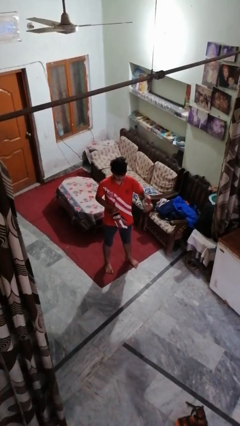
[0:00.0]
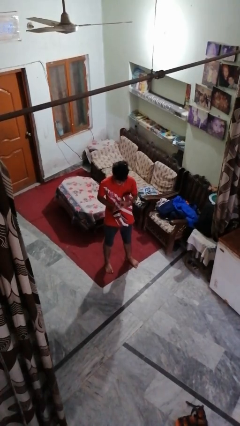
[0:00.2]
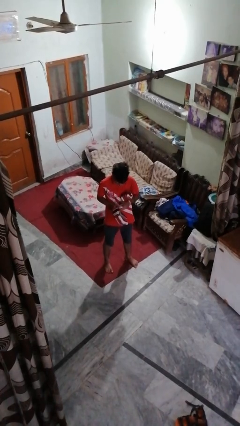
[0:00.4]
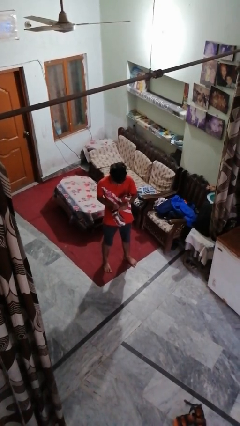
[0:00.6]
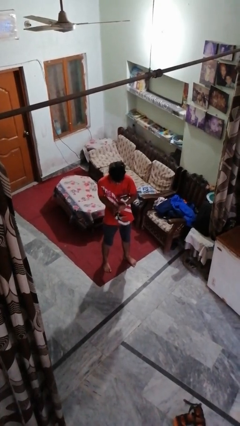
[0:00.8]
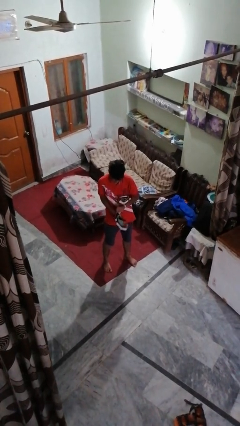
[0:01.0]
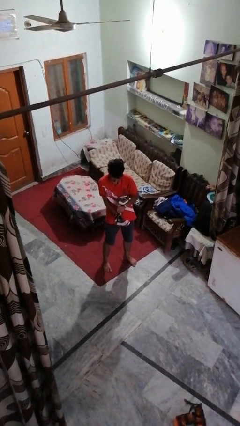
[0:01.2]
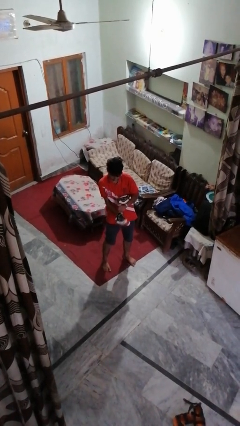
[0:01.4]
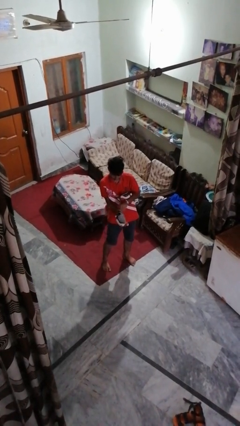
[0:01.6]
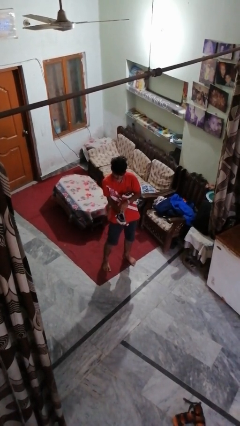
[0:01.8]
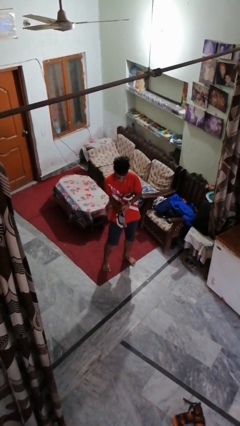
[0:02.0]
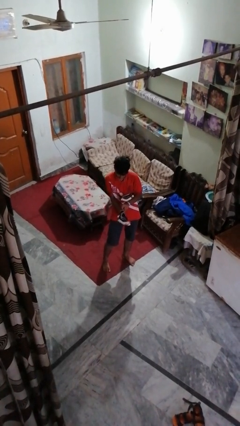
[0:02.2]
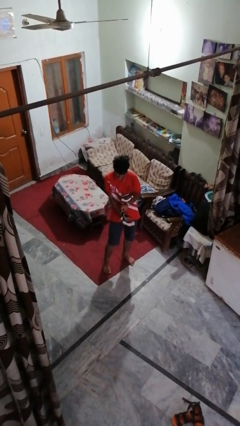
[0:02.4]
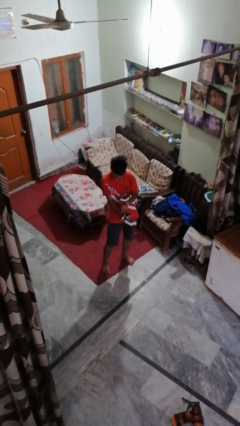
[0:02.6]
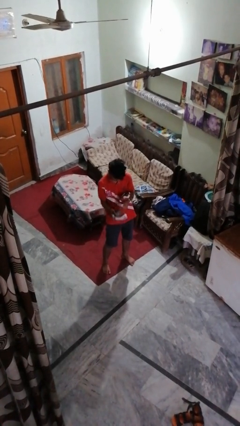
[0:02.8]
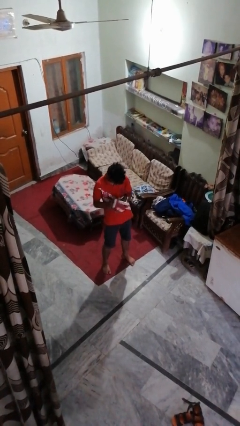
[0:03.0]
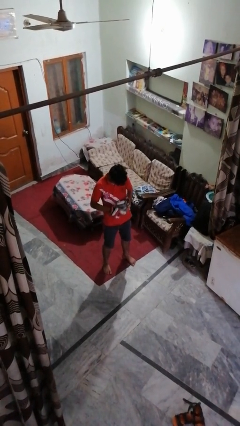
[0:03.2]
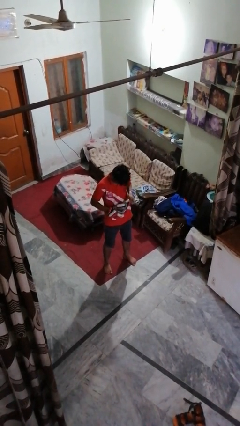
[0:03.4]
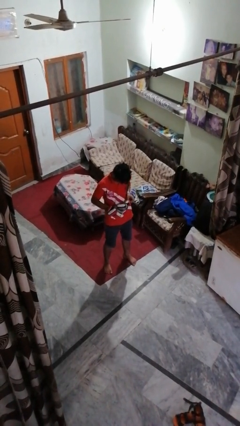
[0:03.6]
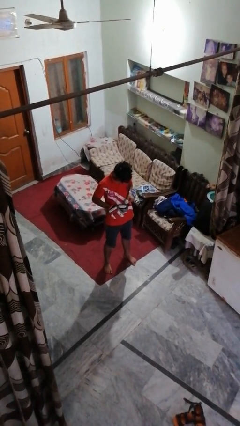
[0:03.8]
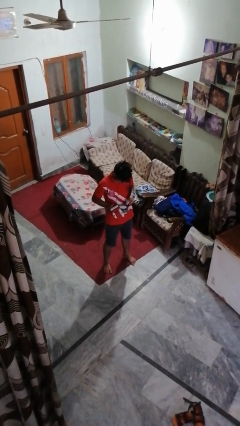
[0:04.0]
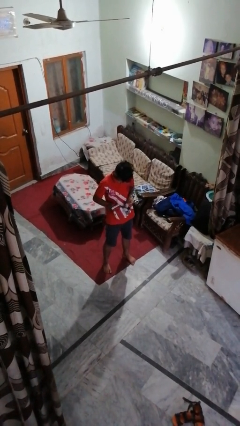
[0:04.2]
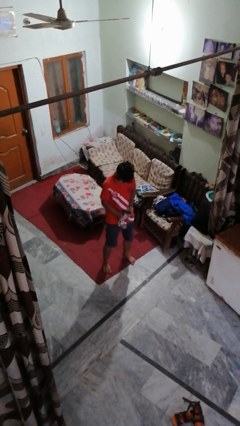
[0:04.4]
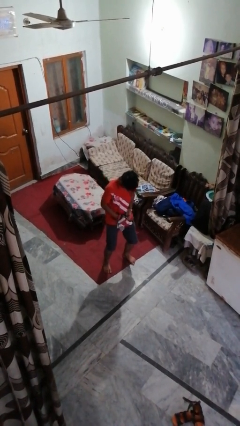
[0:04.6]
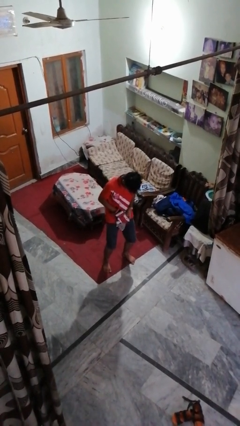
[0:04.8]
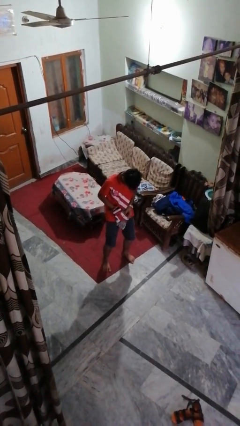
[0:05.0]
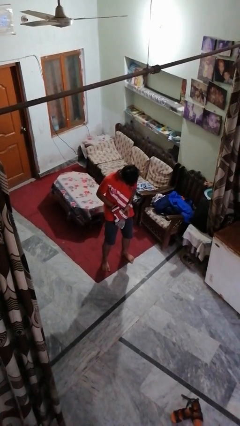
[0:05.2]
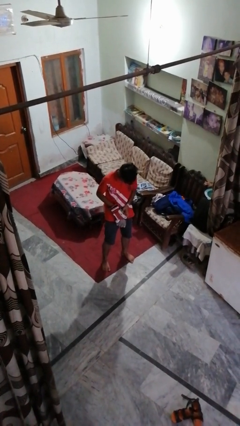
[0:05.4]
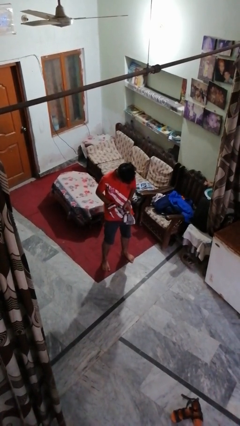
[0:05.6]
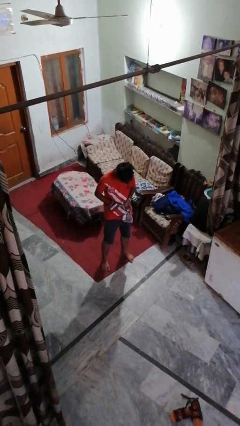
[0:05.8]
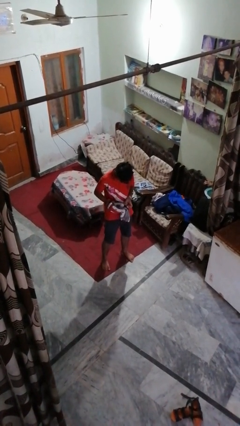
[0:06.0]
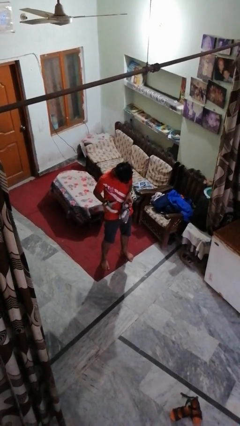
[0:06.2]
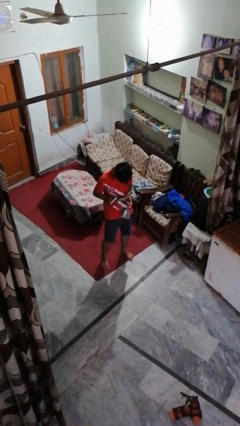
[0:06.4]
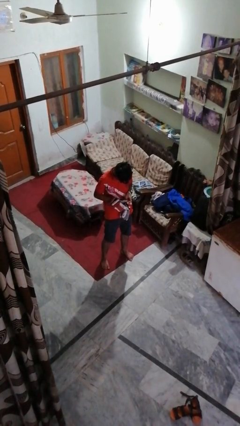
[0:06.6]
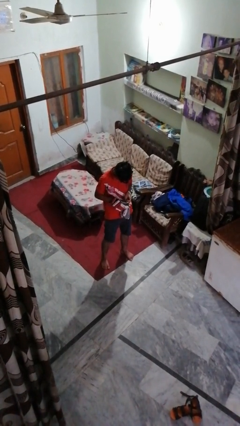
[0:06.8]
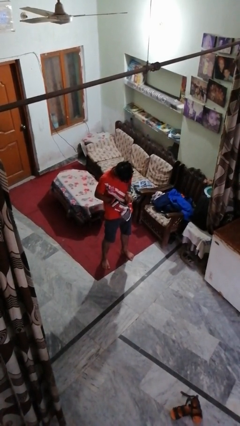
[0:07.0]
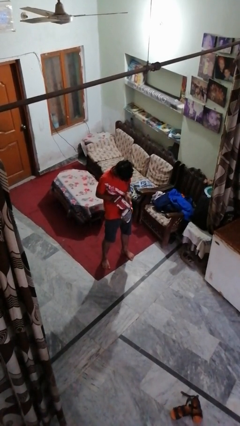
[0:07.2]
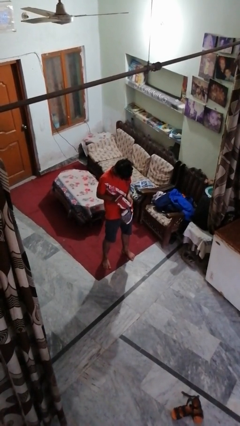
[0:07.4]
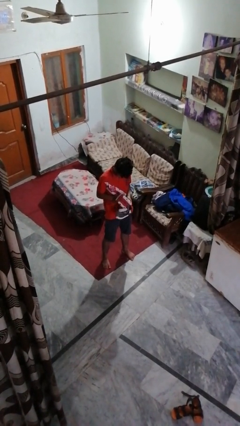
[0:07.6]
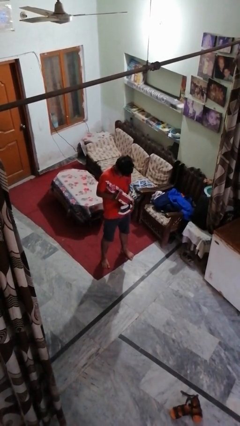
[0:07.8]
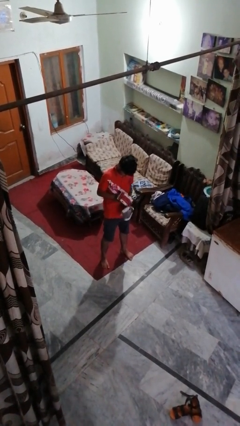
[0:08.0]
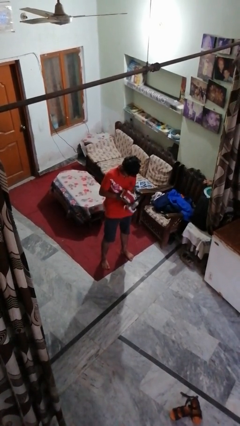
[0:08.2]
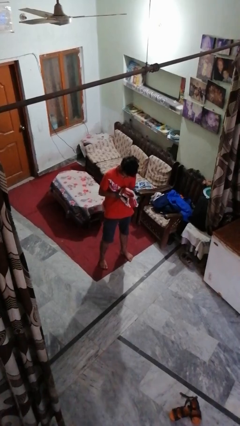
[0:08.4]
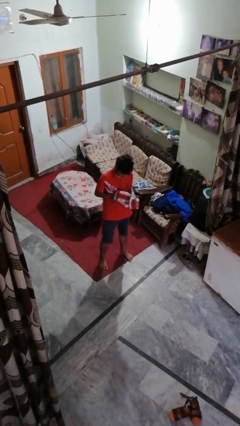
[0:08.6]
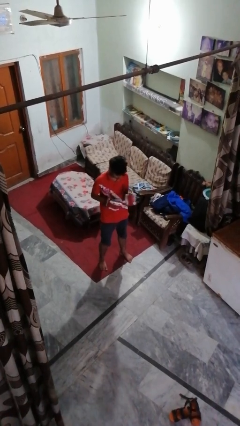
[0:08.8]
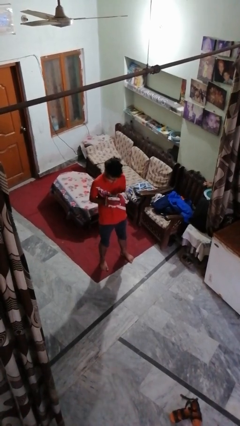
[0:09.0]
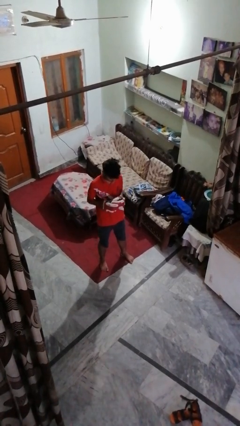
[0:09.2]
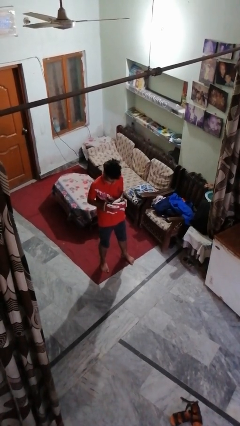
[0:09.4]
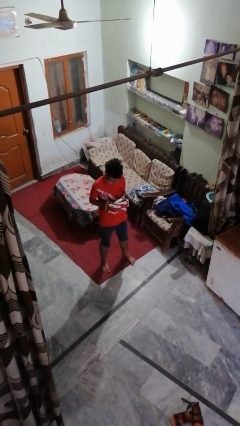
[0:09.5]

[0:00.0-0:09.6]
person puts on gloves

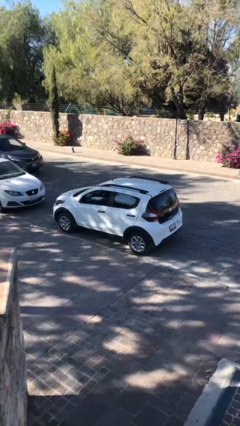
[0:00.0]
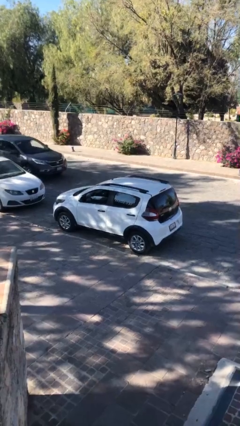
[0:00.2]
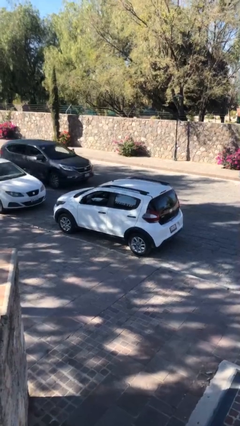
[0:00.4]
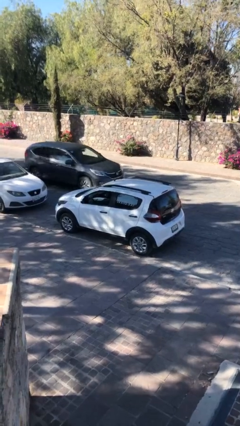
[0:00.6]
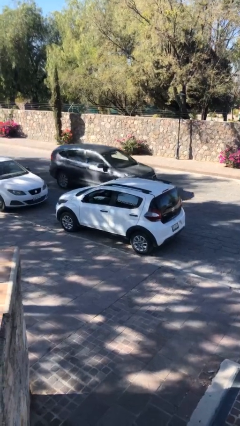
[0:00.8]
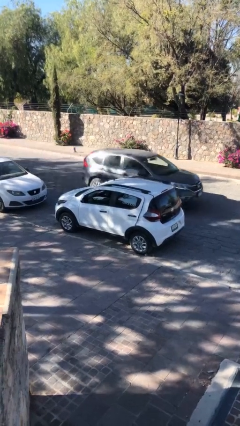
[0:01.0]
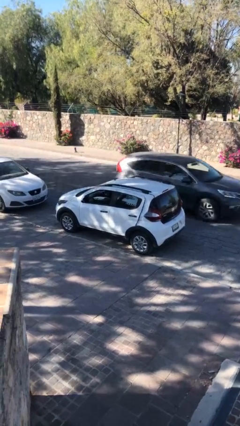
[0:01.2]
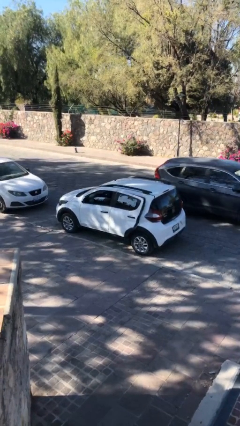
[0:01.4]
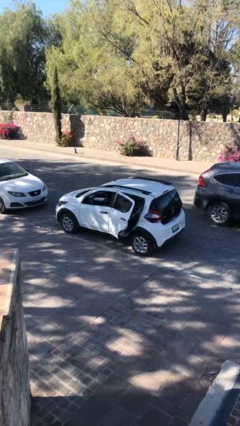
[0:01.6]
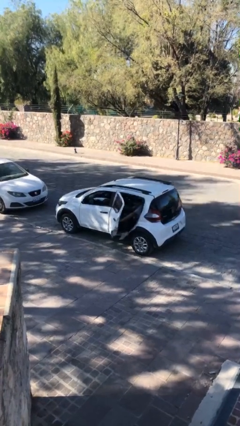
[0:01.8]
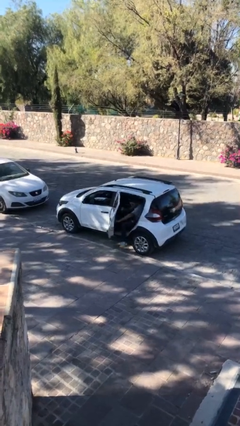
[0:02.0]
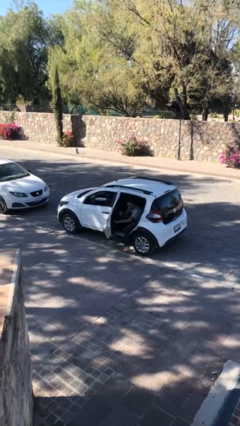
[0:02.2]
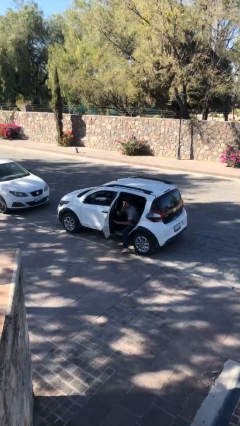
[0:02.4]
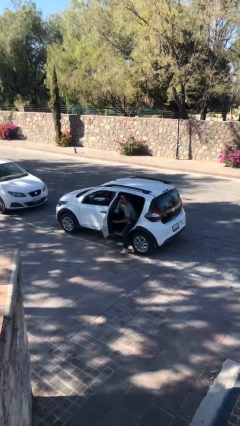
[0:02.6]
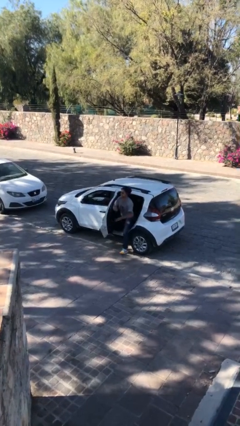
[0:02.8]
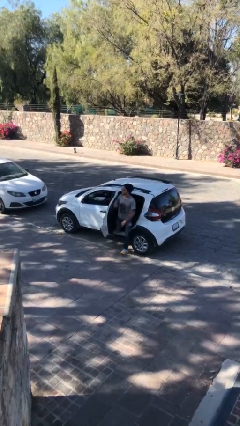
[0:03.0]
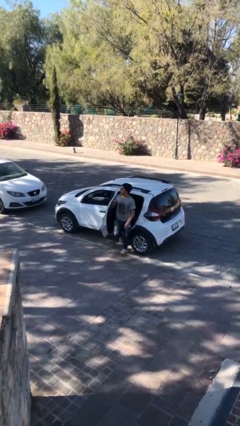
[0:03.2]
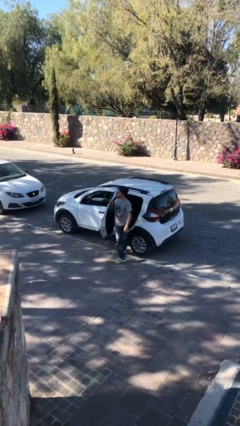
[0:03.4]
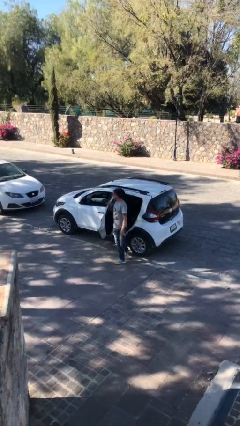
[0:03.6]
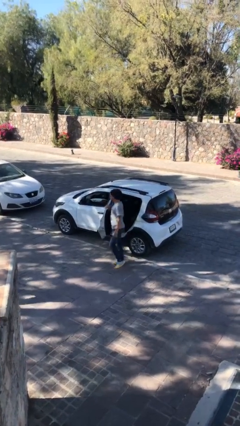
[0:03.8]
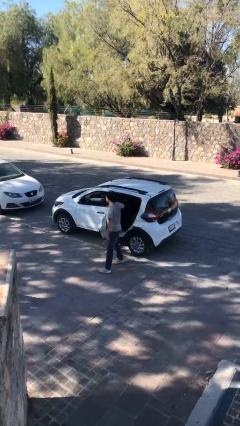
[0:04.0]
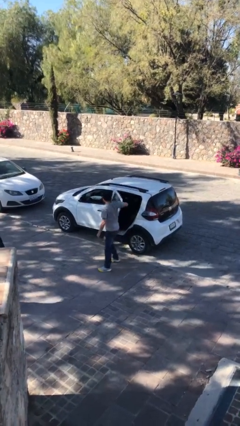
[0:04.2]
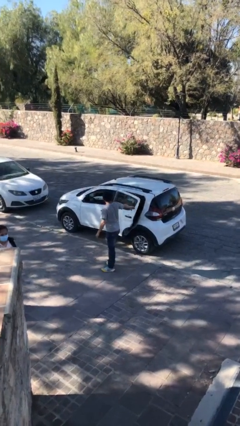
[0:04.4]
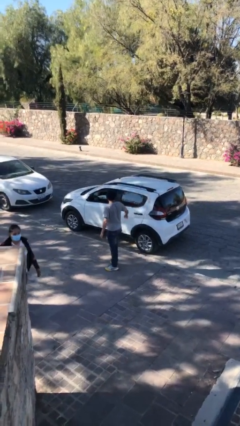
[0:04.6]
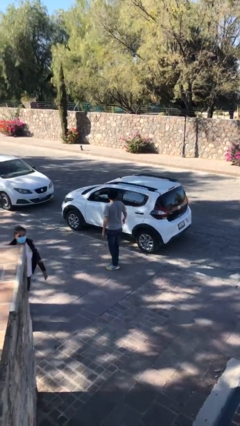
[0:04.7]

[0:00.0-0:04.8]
car drops off person

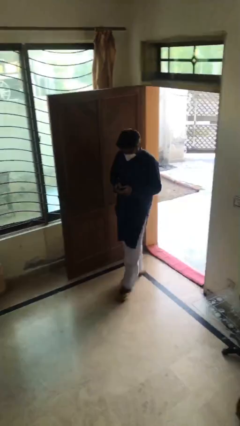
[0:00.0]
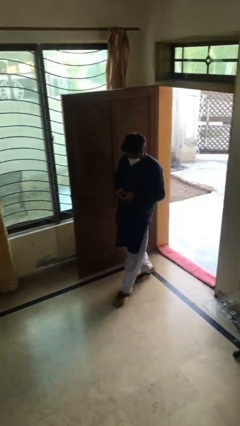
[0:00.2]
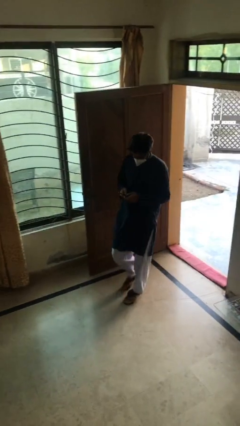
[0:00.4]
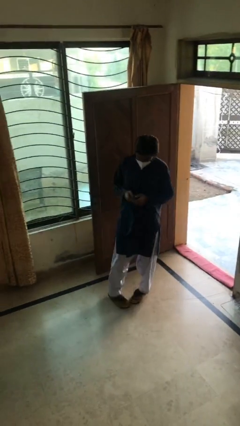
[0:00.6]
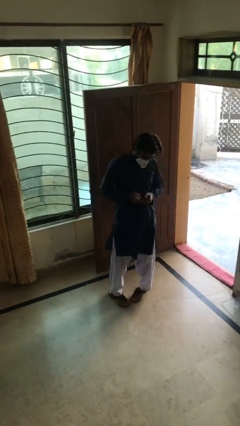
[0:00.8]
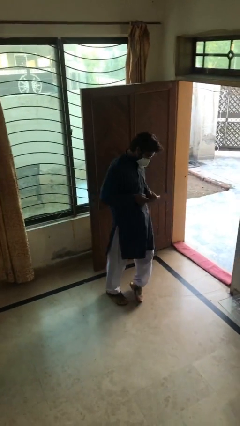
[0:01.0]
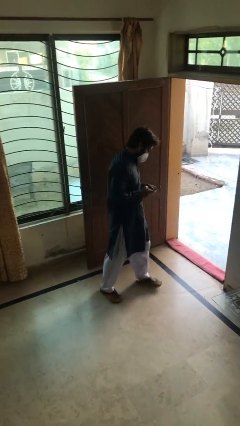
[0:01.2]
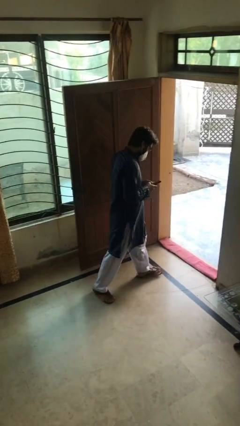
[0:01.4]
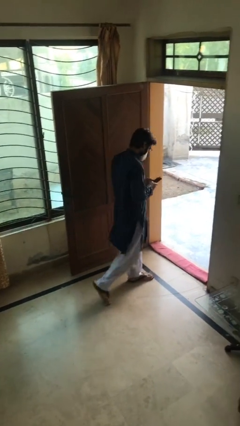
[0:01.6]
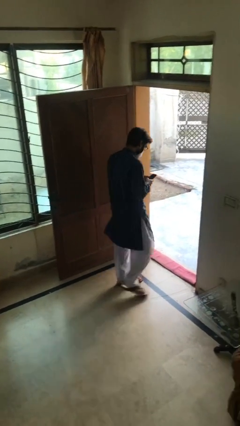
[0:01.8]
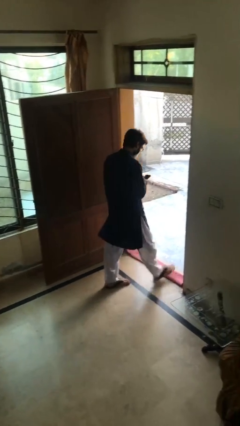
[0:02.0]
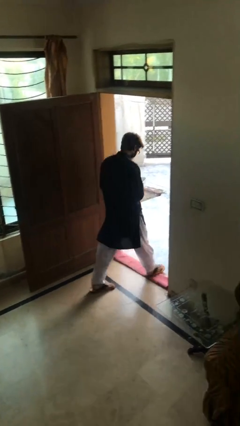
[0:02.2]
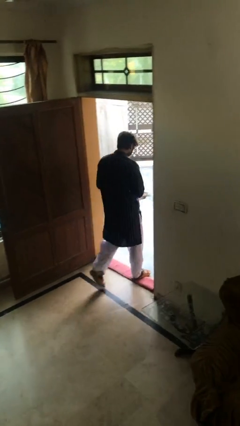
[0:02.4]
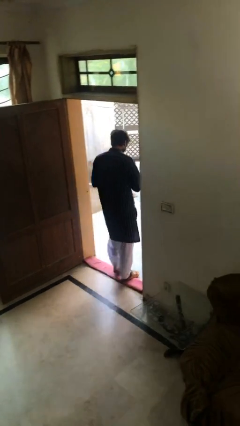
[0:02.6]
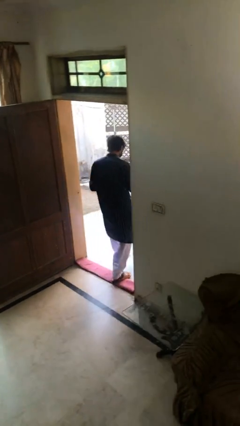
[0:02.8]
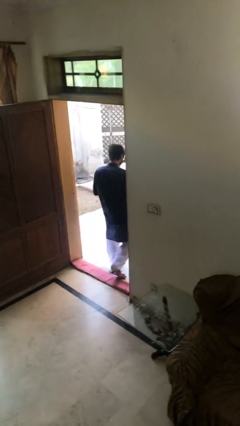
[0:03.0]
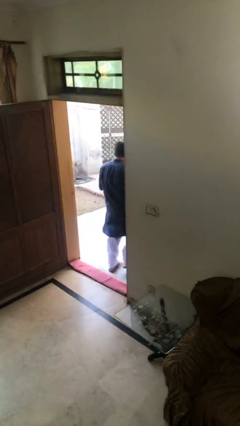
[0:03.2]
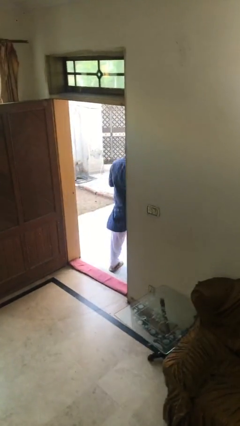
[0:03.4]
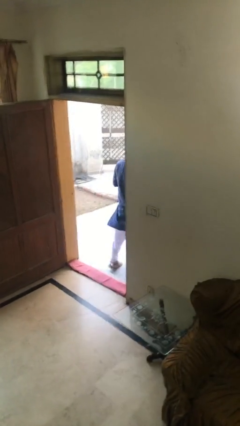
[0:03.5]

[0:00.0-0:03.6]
person exits scene through structure
